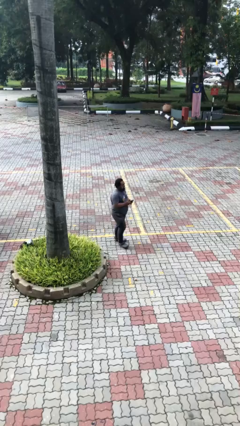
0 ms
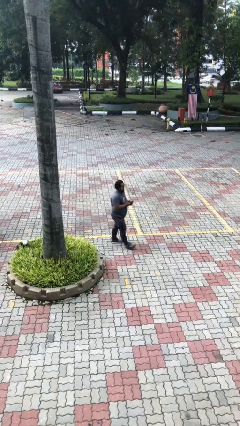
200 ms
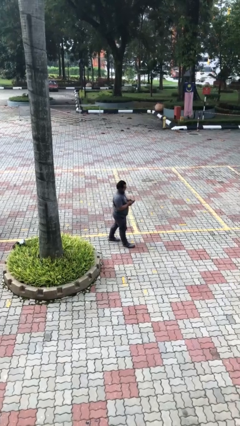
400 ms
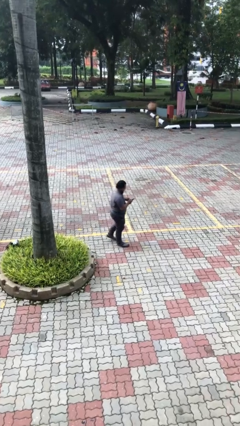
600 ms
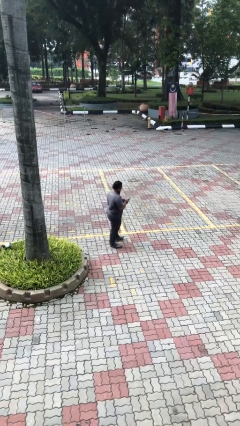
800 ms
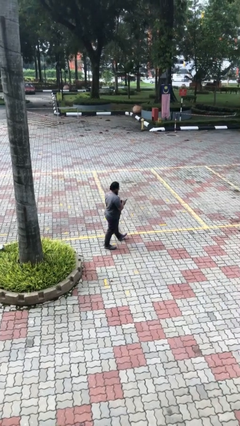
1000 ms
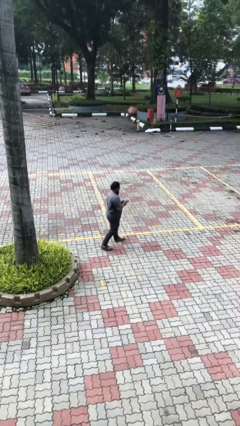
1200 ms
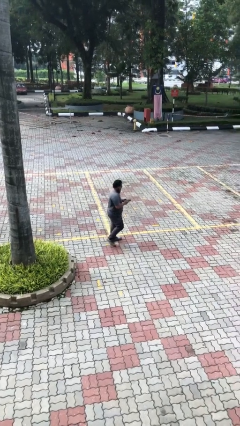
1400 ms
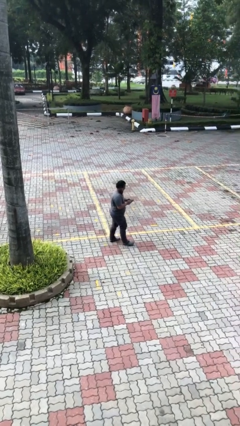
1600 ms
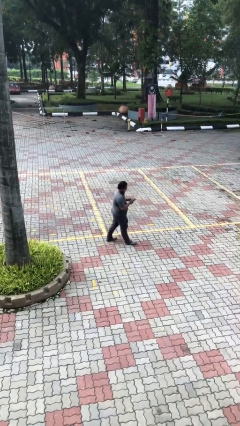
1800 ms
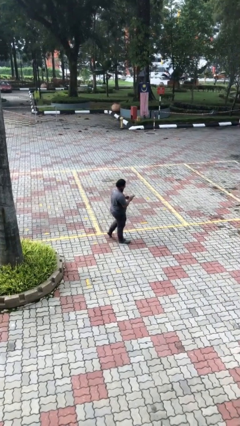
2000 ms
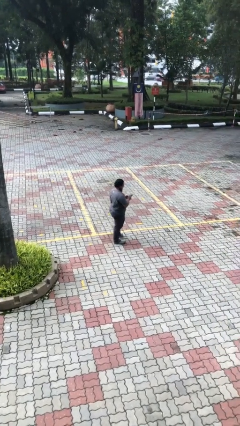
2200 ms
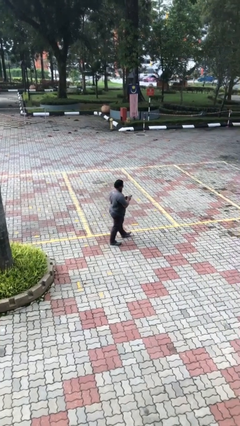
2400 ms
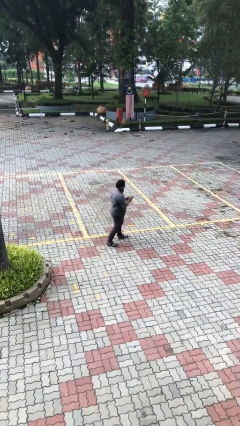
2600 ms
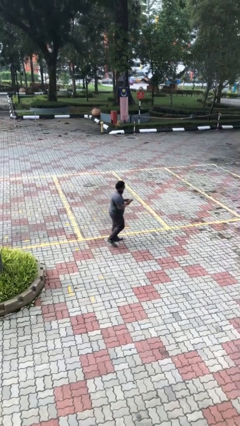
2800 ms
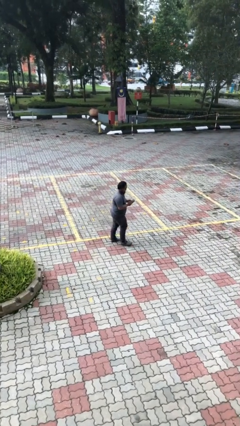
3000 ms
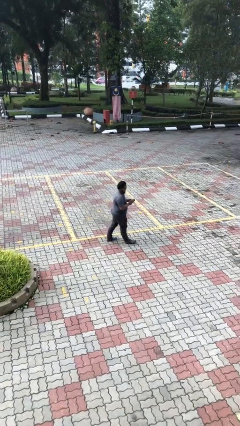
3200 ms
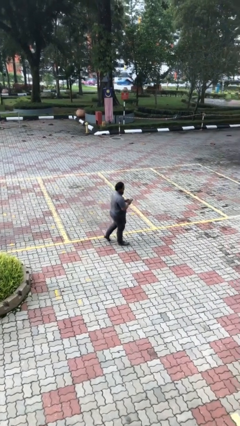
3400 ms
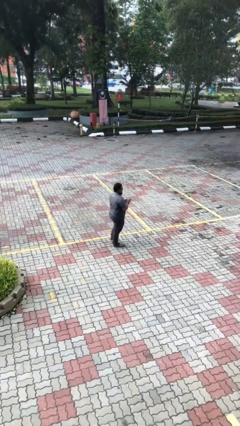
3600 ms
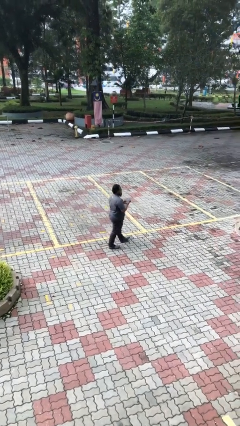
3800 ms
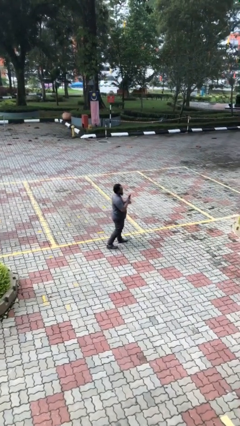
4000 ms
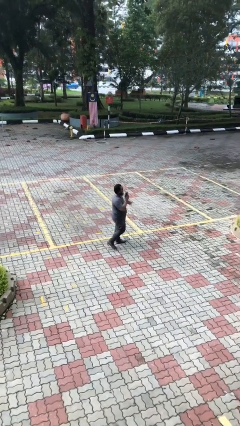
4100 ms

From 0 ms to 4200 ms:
person texts on phone

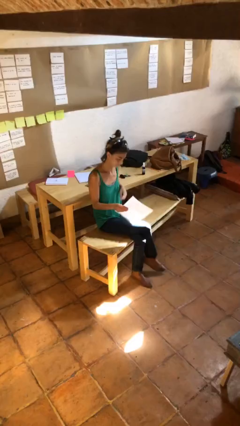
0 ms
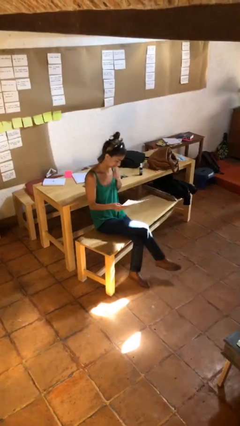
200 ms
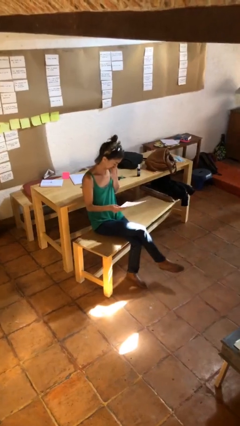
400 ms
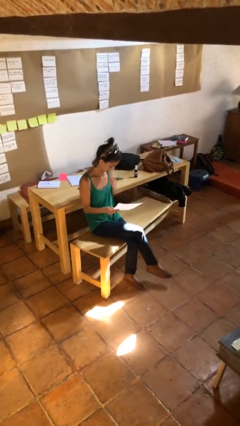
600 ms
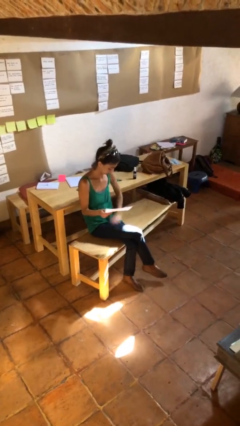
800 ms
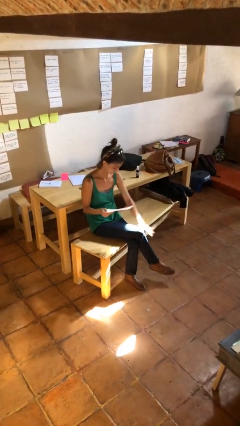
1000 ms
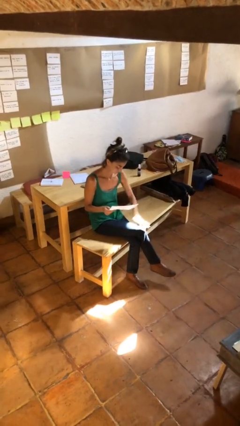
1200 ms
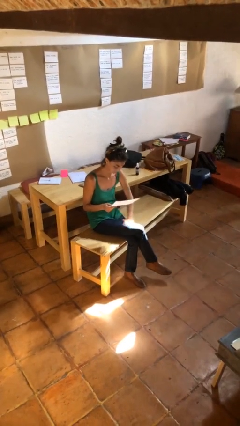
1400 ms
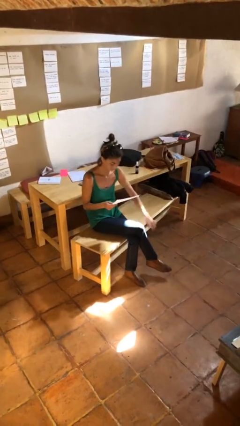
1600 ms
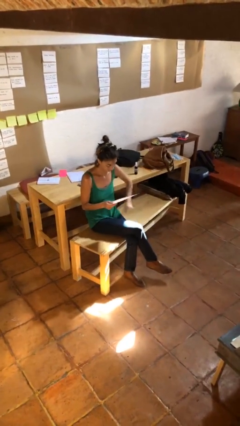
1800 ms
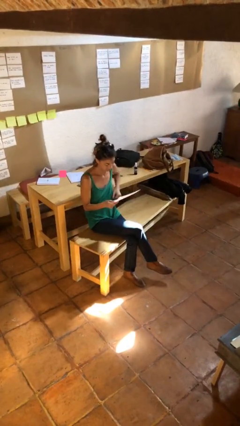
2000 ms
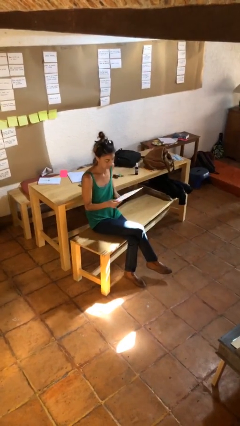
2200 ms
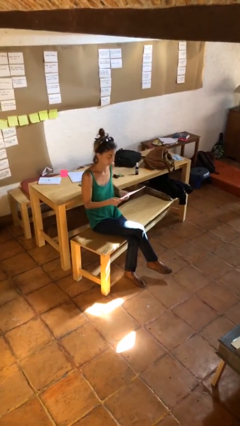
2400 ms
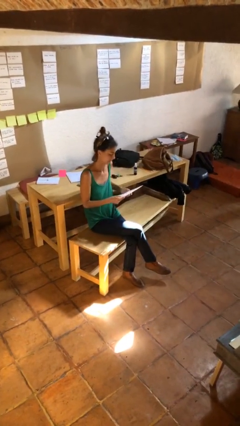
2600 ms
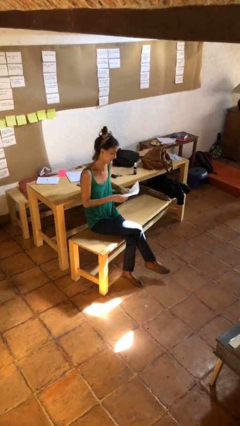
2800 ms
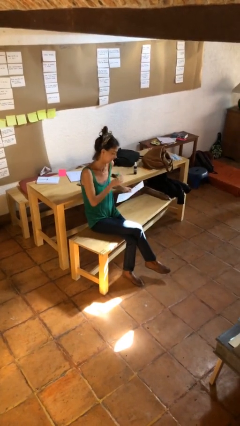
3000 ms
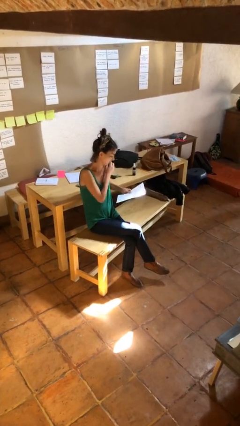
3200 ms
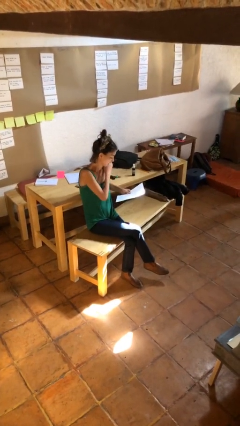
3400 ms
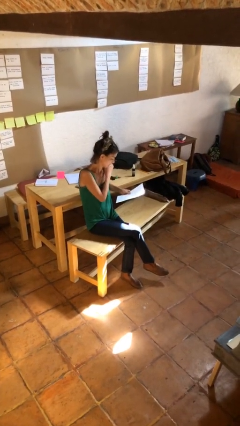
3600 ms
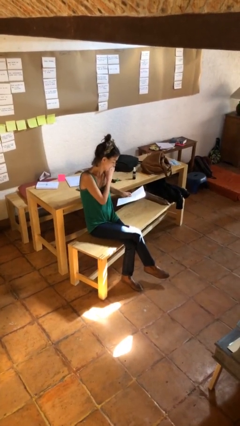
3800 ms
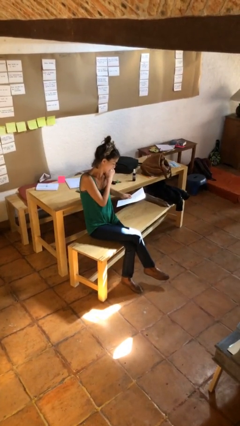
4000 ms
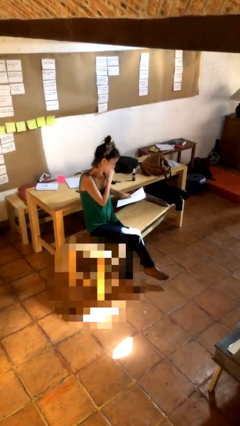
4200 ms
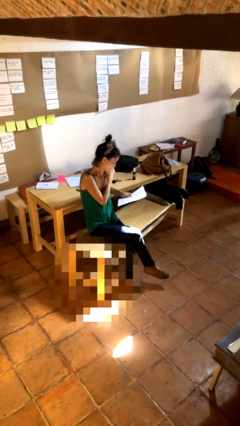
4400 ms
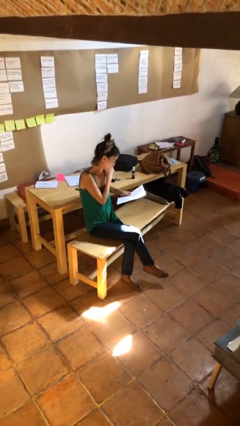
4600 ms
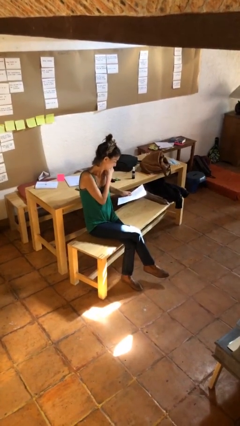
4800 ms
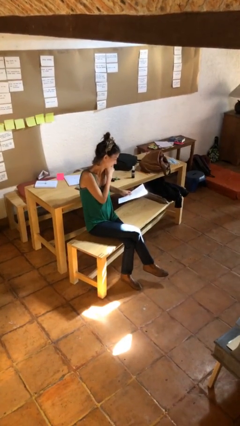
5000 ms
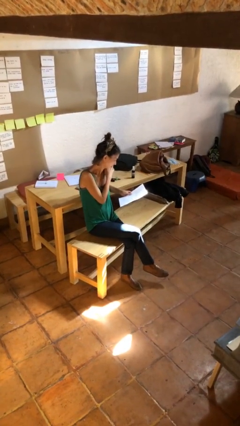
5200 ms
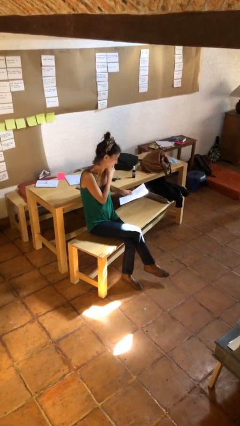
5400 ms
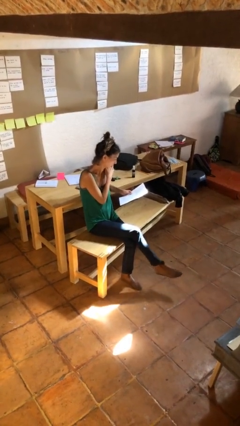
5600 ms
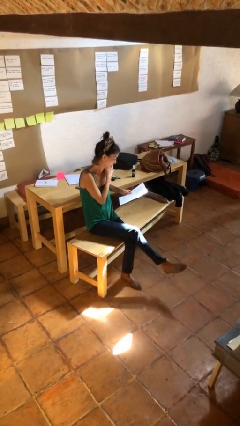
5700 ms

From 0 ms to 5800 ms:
person reads document

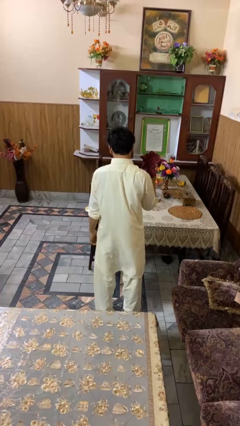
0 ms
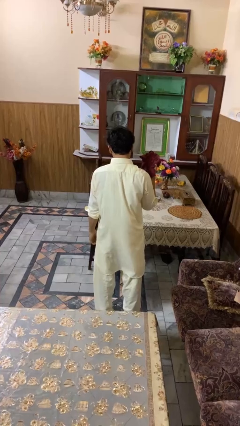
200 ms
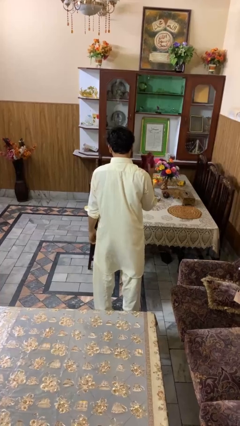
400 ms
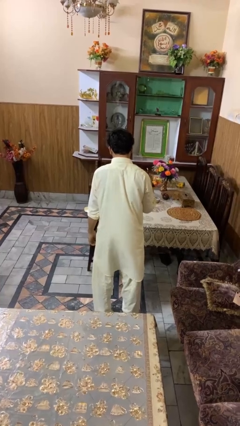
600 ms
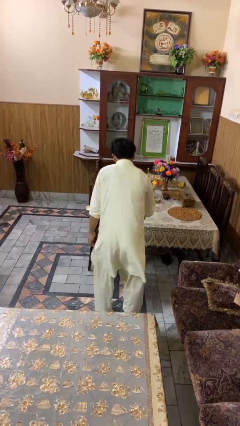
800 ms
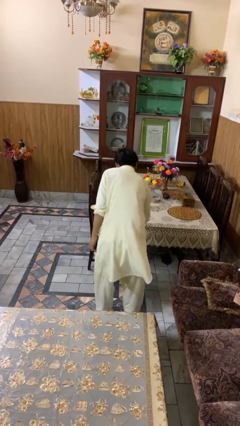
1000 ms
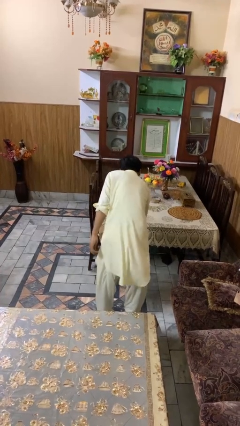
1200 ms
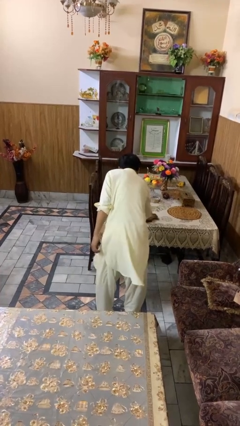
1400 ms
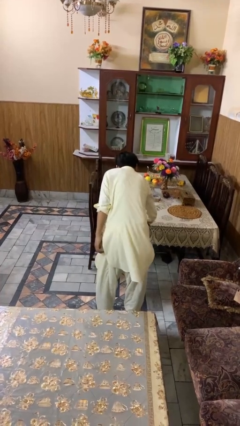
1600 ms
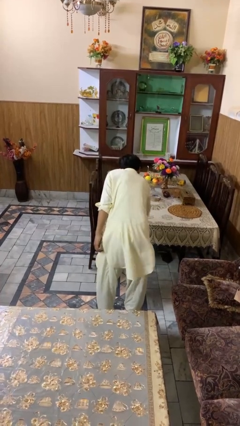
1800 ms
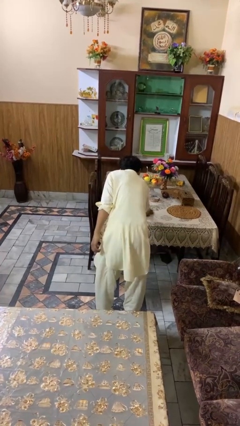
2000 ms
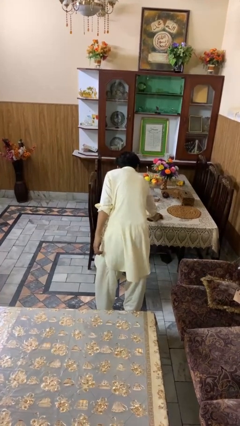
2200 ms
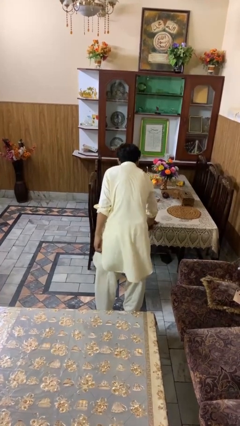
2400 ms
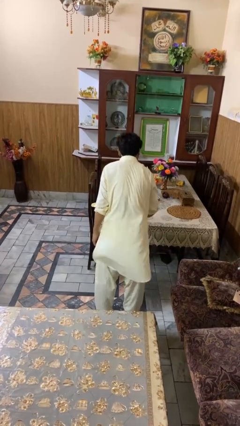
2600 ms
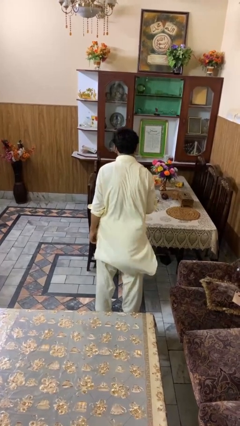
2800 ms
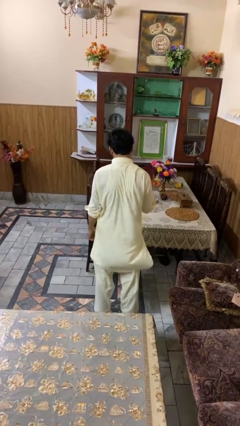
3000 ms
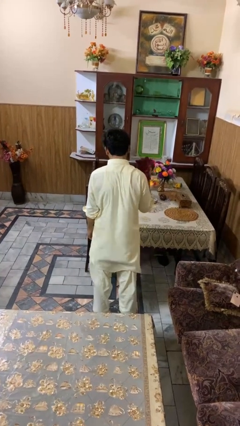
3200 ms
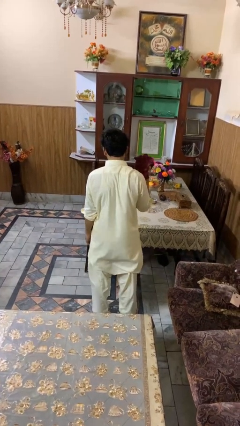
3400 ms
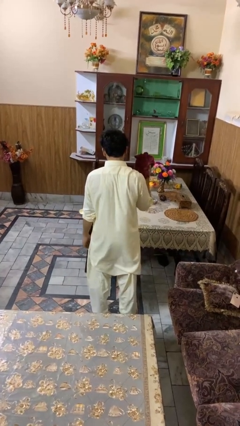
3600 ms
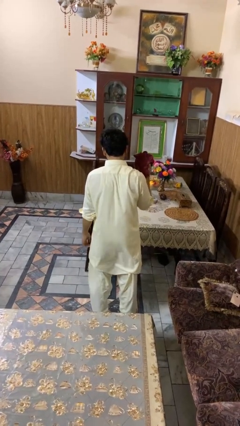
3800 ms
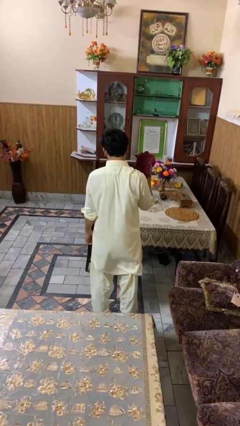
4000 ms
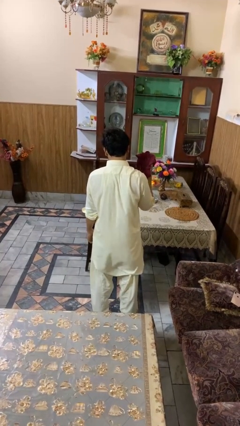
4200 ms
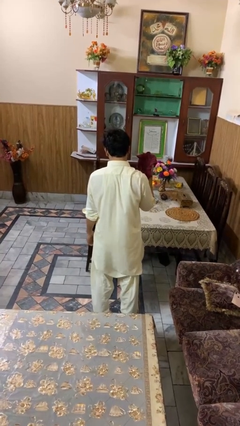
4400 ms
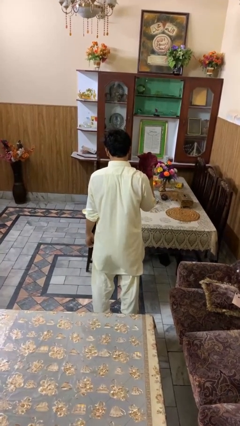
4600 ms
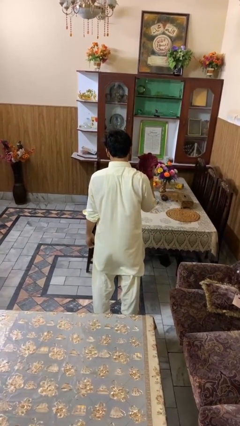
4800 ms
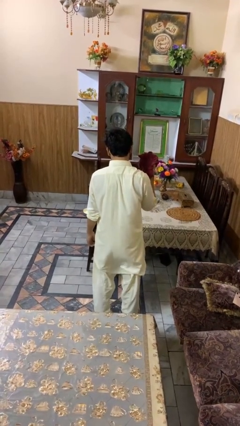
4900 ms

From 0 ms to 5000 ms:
person cleans table with rag

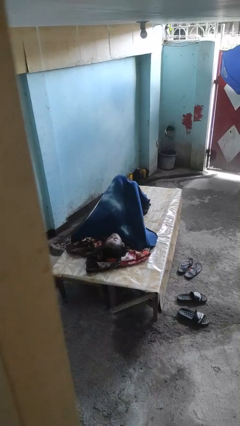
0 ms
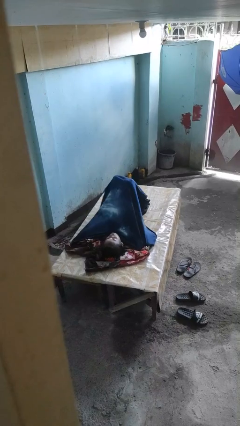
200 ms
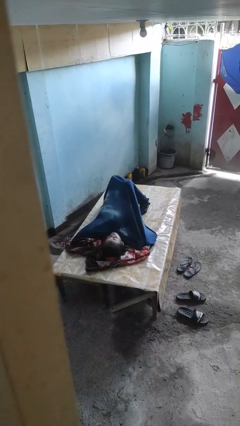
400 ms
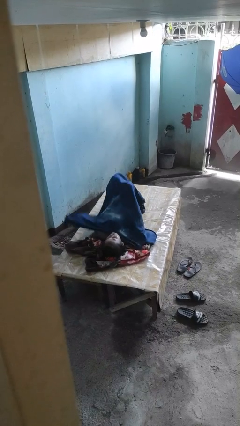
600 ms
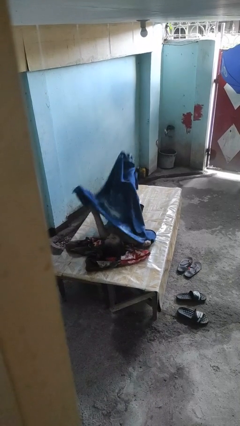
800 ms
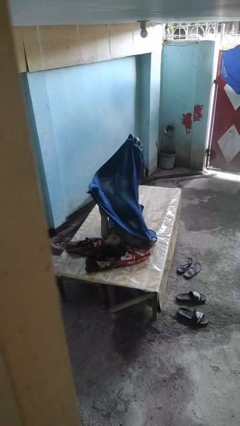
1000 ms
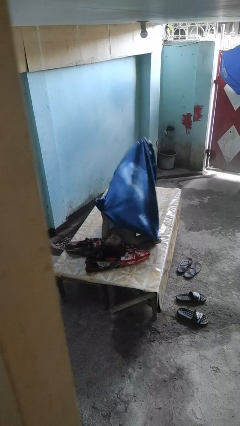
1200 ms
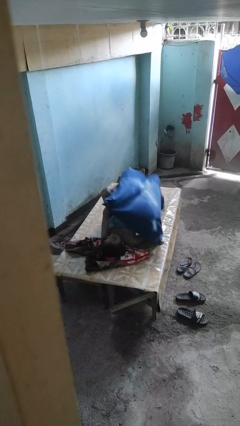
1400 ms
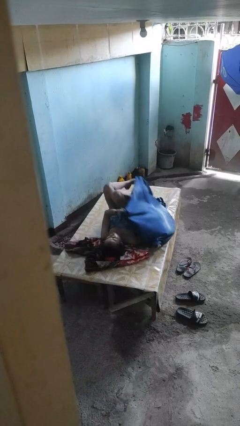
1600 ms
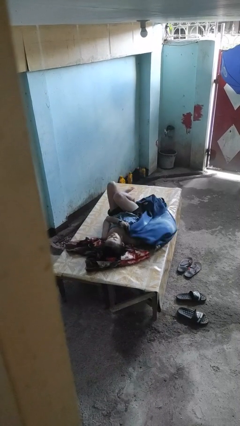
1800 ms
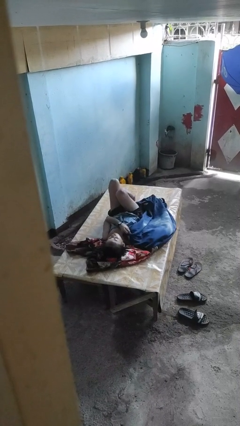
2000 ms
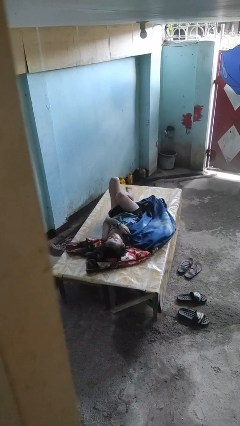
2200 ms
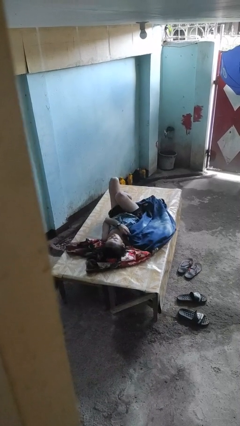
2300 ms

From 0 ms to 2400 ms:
person uncovers with bedsheets

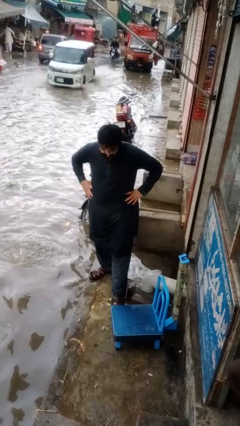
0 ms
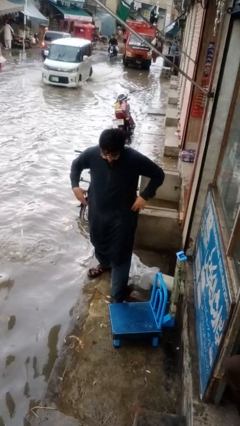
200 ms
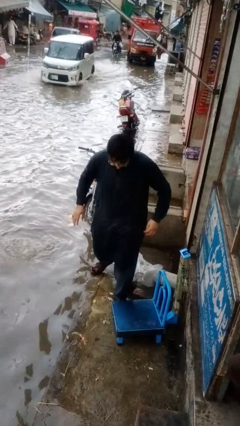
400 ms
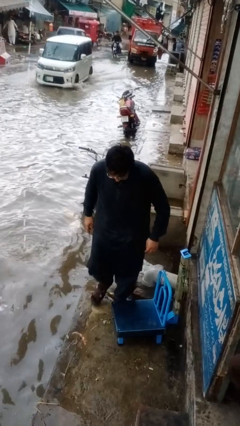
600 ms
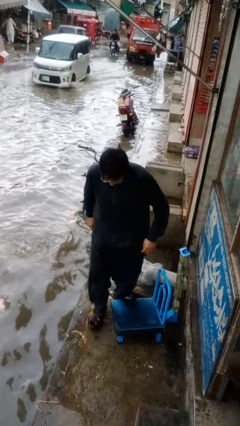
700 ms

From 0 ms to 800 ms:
person trips on object on floor
